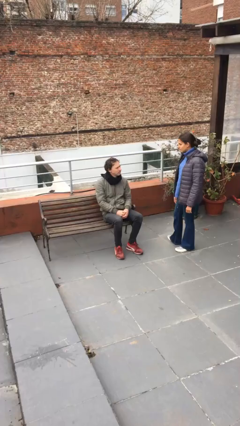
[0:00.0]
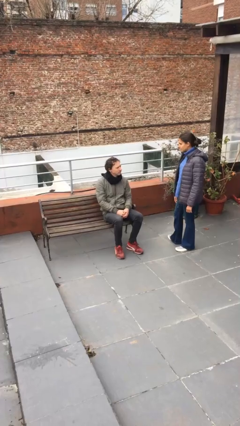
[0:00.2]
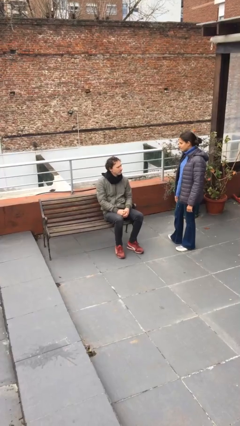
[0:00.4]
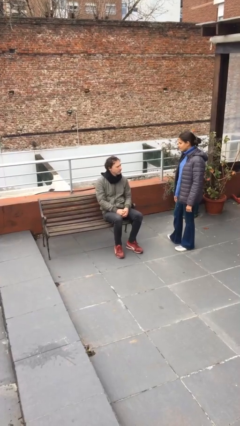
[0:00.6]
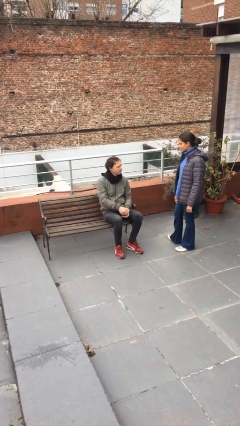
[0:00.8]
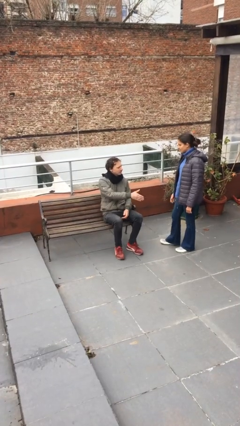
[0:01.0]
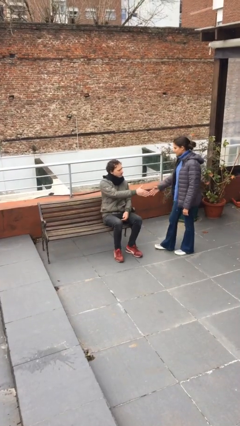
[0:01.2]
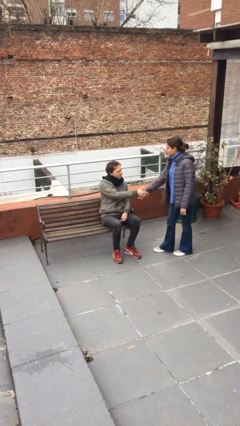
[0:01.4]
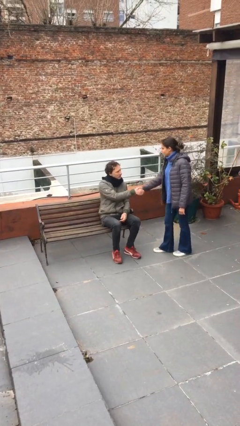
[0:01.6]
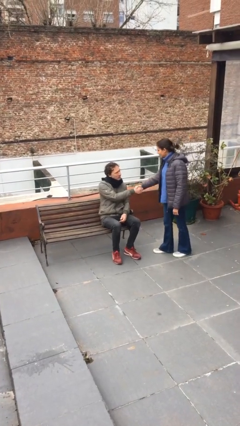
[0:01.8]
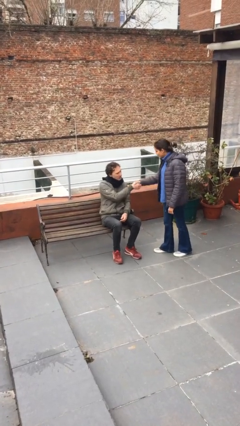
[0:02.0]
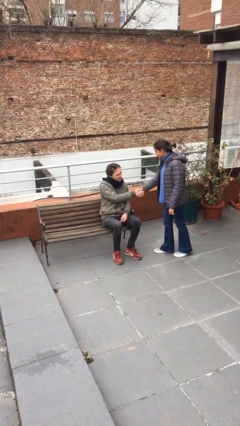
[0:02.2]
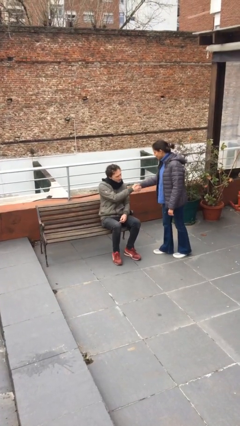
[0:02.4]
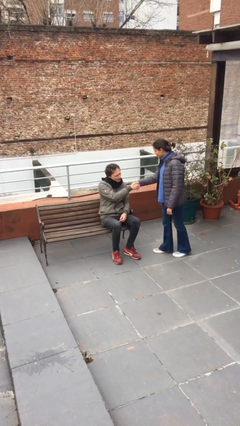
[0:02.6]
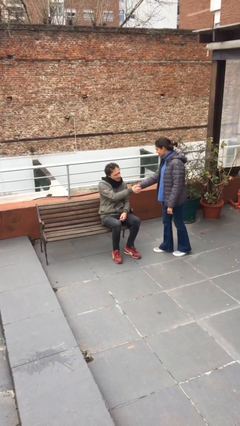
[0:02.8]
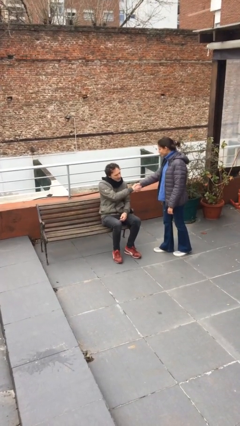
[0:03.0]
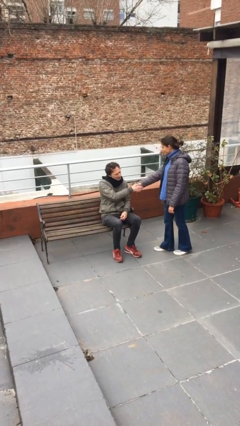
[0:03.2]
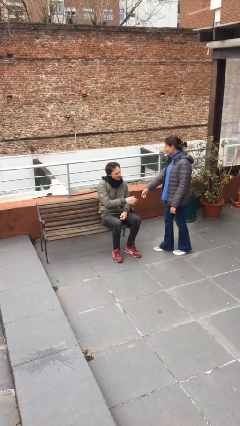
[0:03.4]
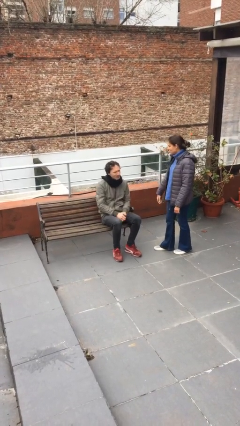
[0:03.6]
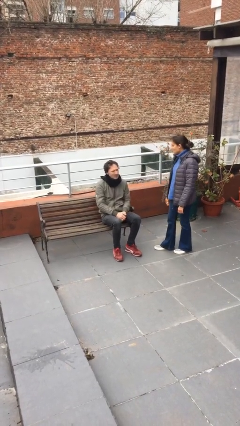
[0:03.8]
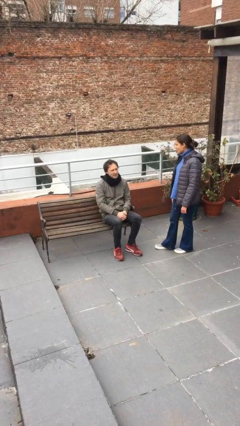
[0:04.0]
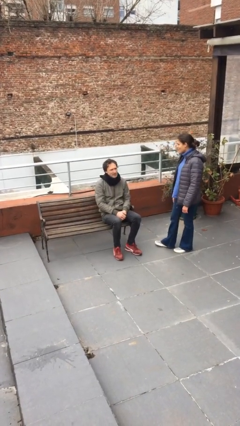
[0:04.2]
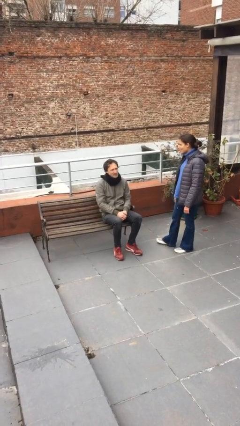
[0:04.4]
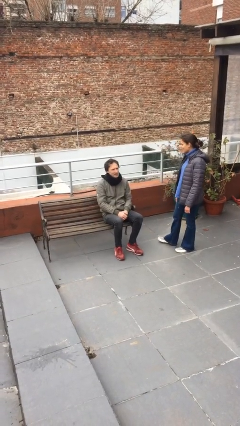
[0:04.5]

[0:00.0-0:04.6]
person shakes hand

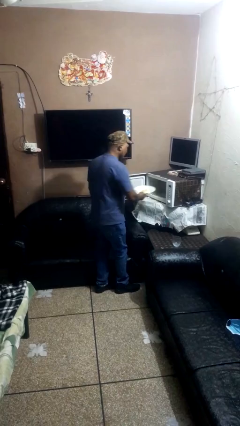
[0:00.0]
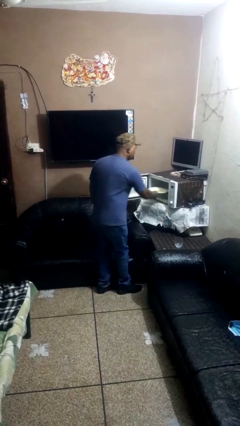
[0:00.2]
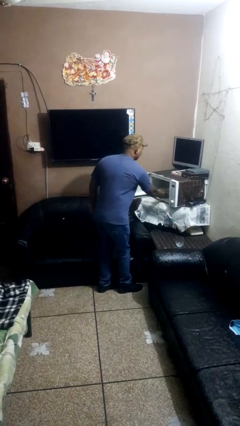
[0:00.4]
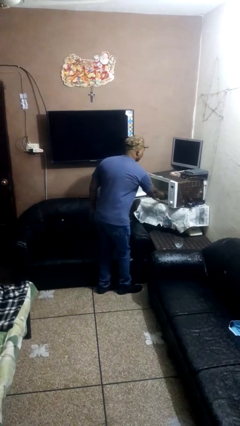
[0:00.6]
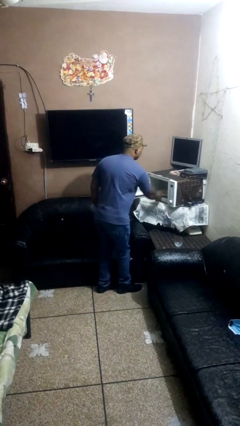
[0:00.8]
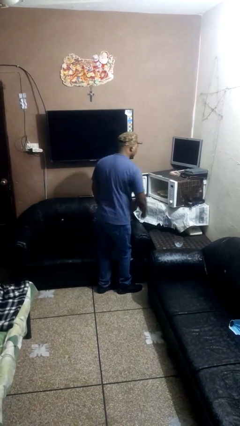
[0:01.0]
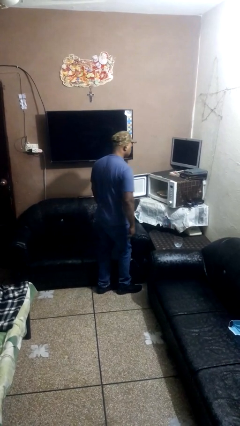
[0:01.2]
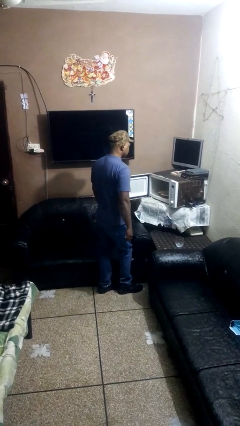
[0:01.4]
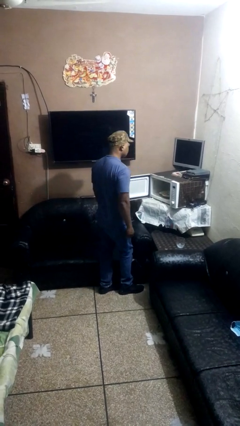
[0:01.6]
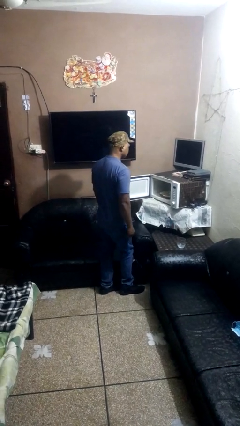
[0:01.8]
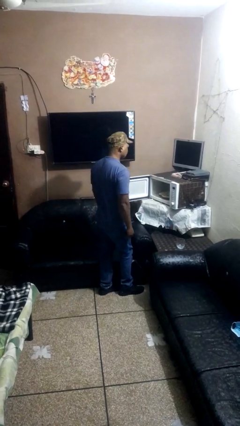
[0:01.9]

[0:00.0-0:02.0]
person puts object into oven

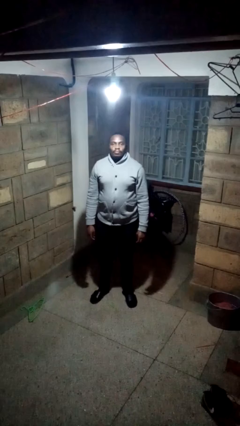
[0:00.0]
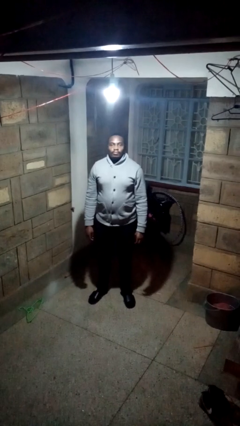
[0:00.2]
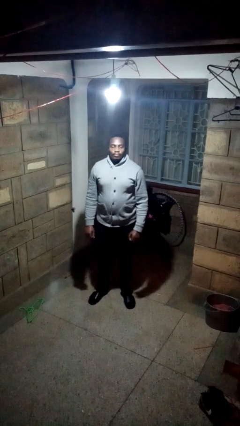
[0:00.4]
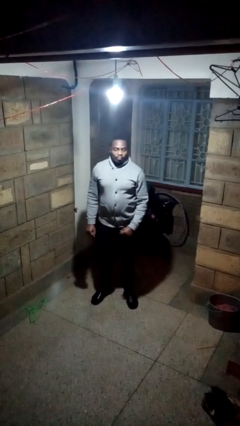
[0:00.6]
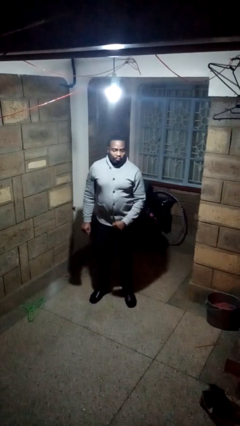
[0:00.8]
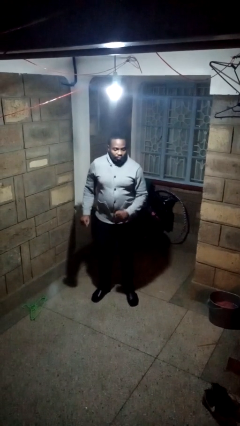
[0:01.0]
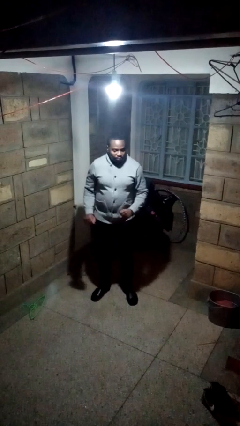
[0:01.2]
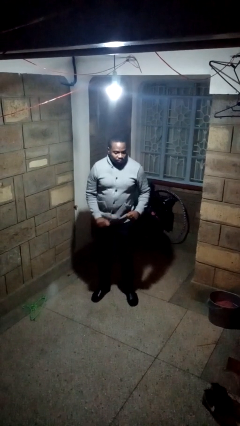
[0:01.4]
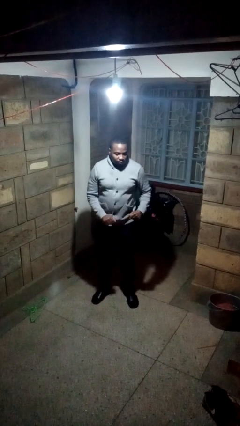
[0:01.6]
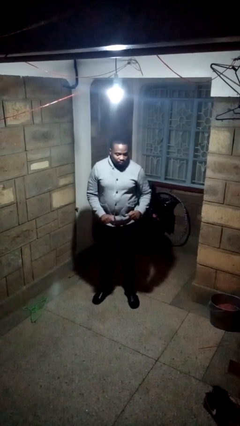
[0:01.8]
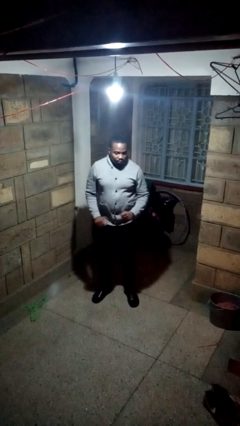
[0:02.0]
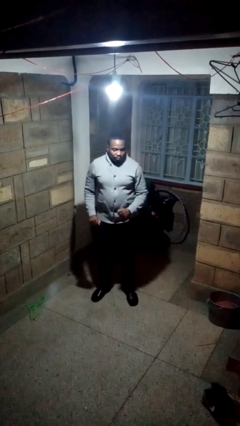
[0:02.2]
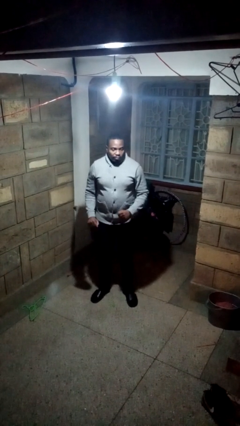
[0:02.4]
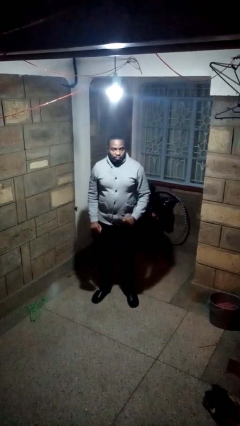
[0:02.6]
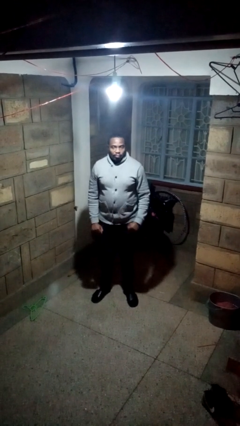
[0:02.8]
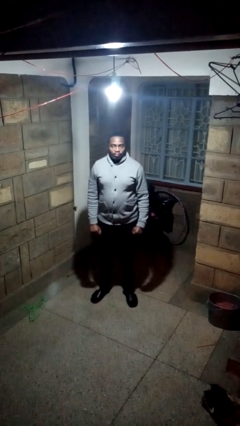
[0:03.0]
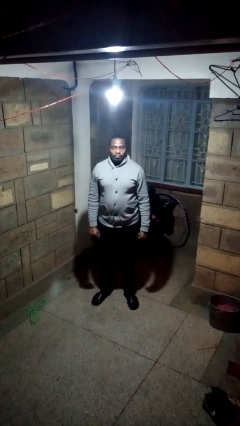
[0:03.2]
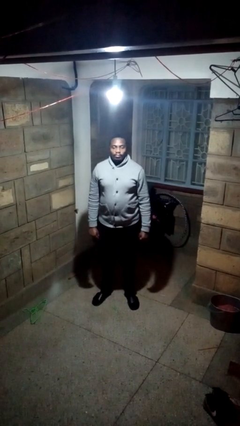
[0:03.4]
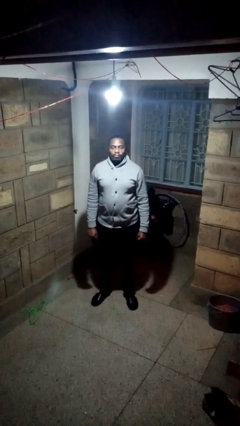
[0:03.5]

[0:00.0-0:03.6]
person dances in place

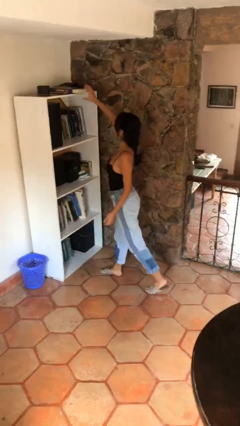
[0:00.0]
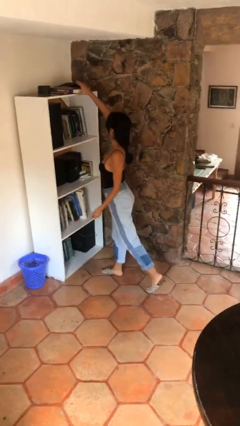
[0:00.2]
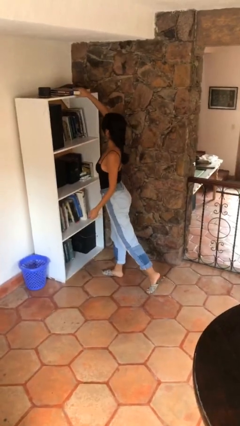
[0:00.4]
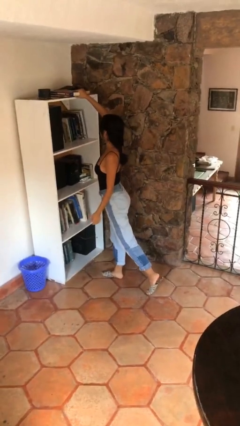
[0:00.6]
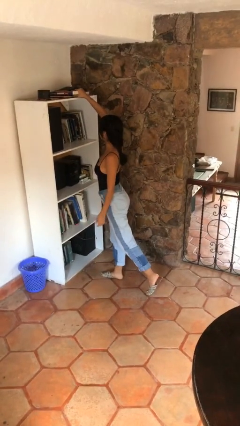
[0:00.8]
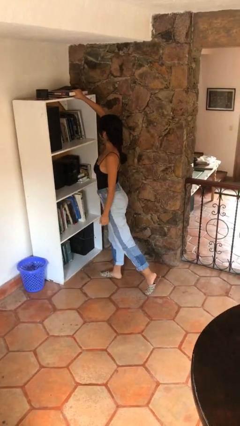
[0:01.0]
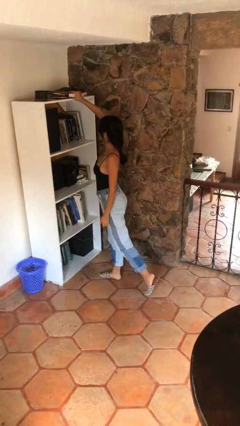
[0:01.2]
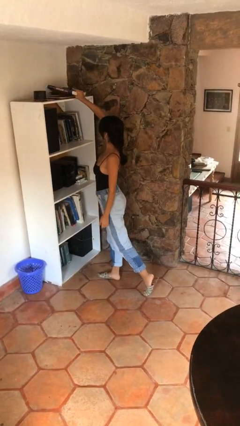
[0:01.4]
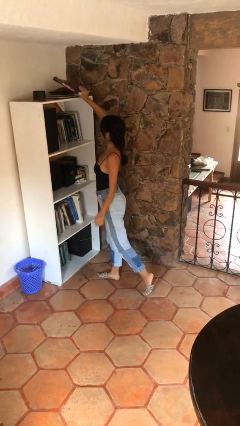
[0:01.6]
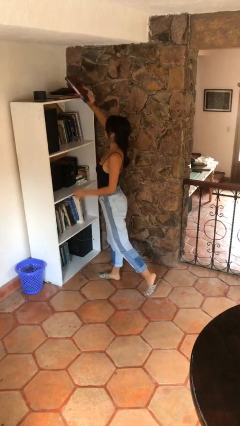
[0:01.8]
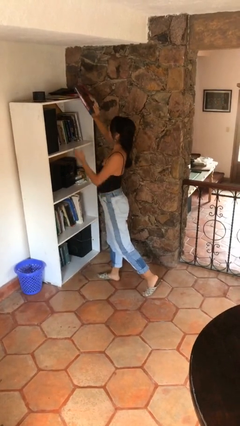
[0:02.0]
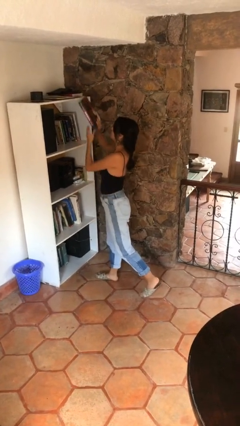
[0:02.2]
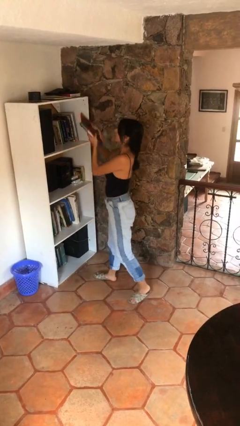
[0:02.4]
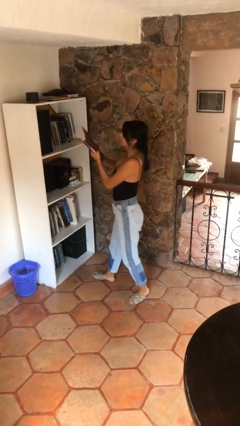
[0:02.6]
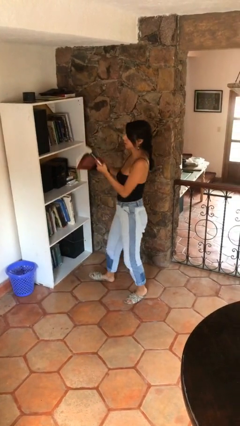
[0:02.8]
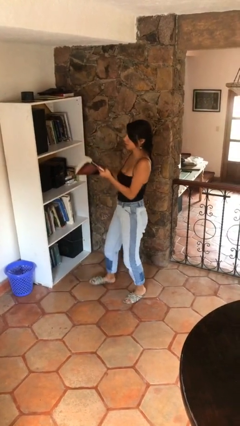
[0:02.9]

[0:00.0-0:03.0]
person picks up object from shelf

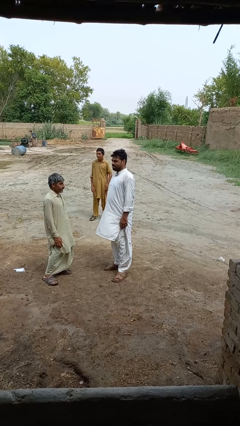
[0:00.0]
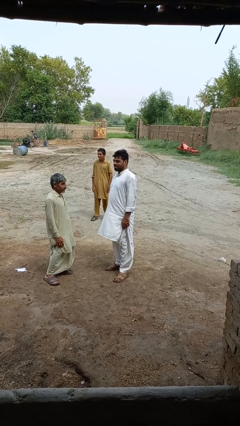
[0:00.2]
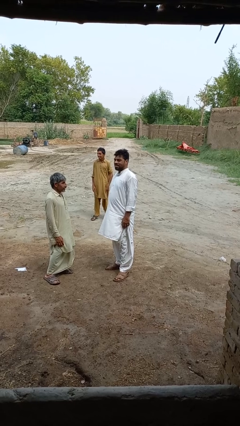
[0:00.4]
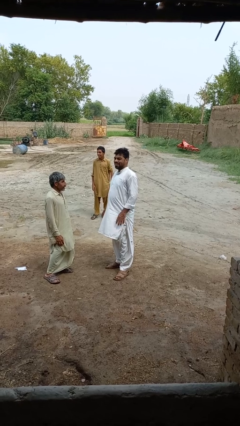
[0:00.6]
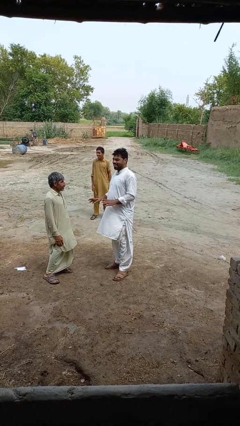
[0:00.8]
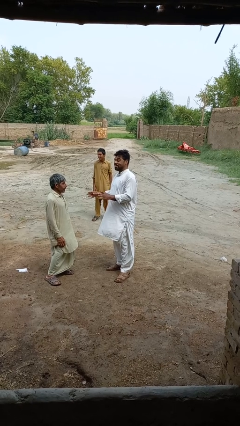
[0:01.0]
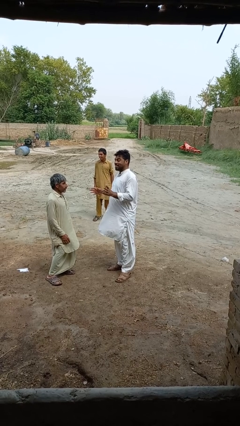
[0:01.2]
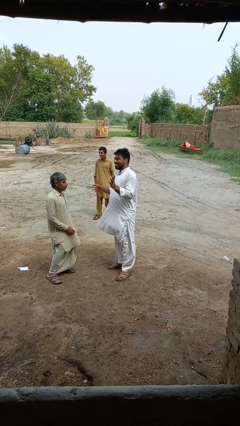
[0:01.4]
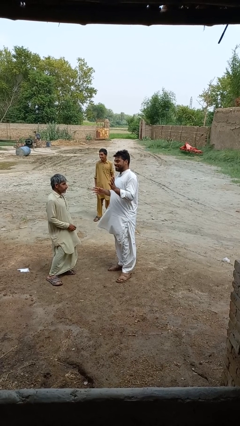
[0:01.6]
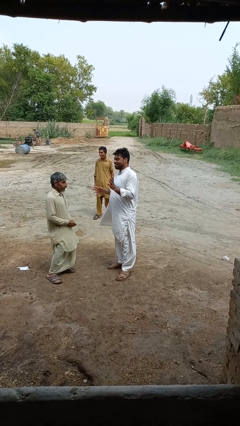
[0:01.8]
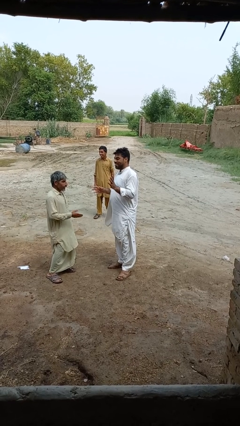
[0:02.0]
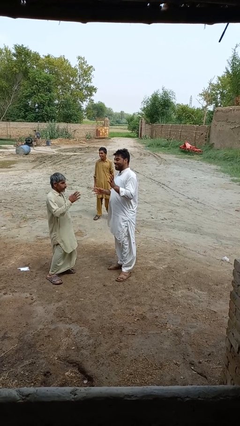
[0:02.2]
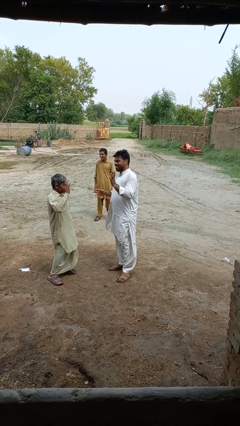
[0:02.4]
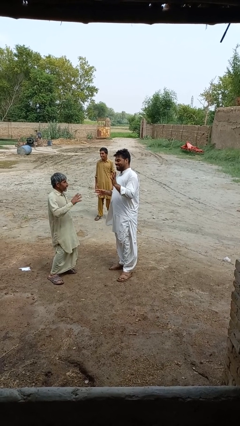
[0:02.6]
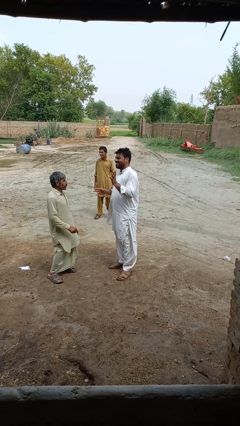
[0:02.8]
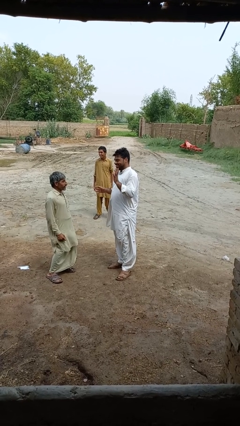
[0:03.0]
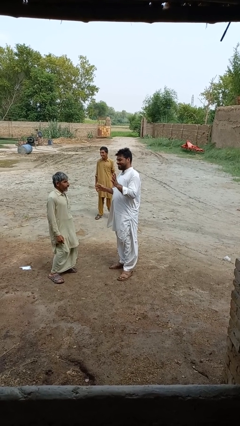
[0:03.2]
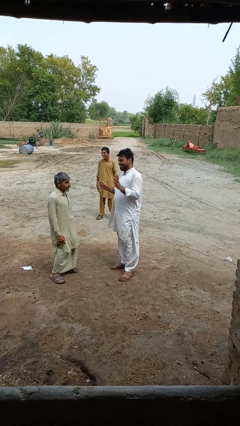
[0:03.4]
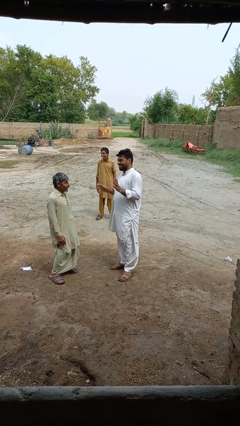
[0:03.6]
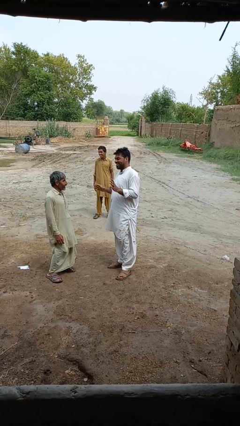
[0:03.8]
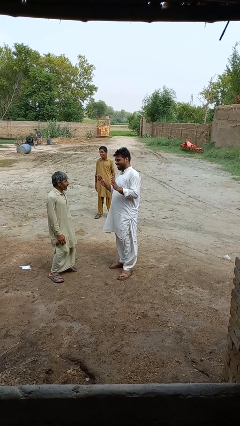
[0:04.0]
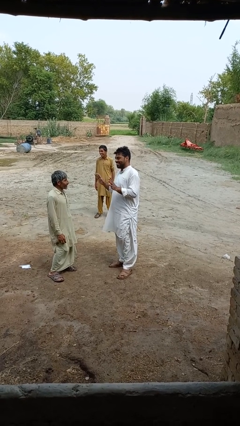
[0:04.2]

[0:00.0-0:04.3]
person laughs with person

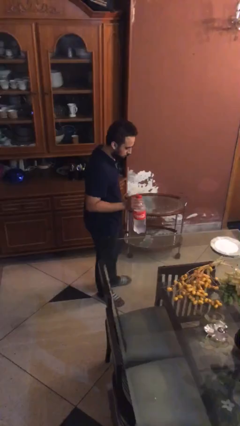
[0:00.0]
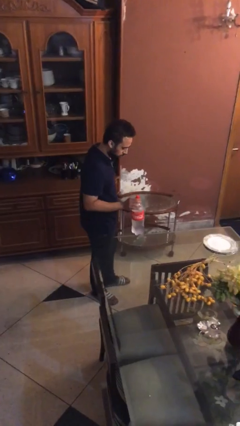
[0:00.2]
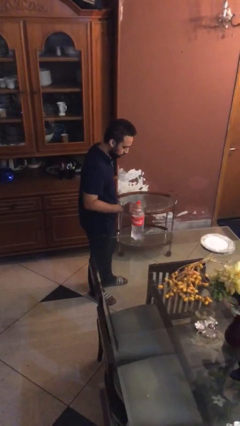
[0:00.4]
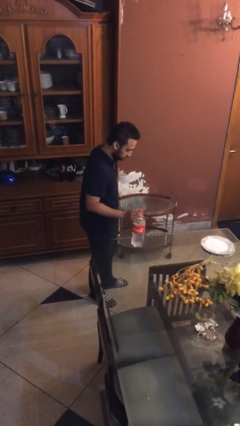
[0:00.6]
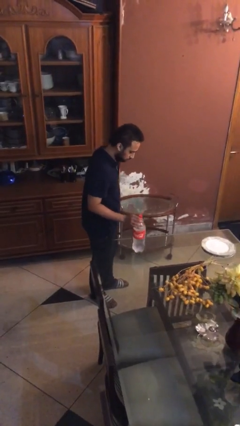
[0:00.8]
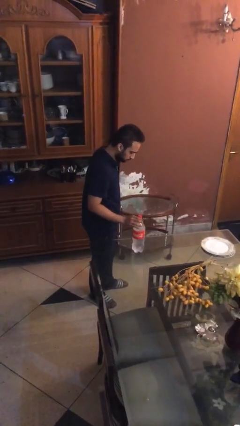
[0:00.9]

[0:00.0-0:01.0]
person puts down object on table
